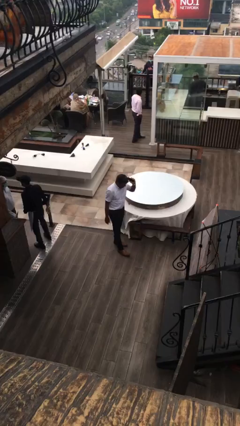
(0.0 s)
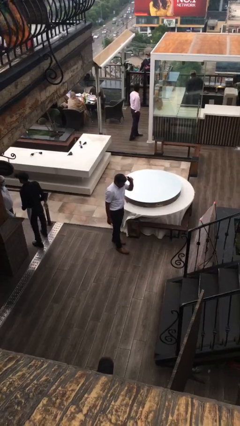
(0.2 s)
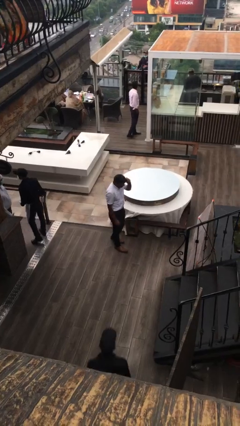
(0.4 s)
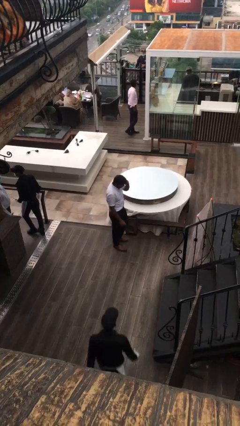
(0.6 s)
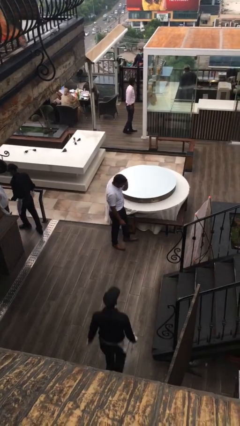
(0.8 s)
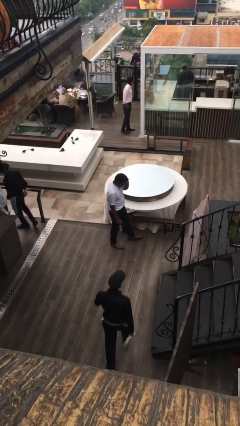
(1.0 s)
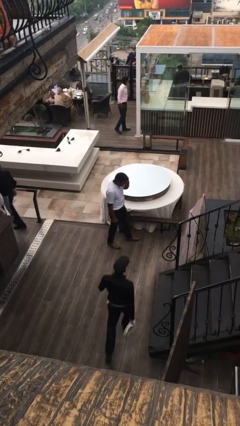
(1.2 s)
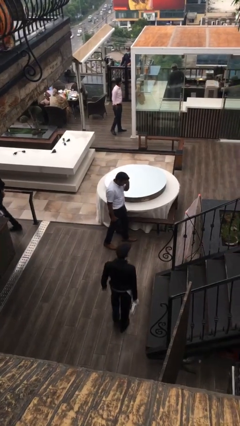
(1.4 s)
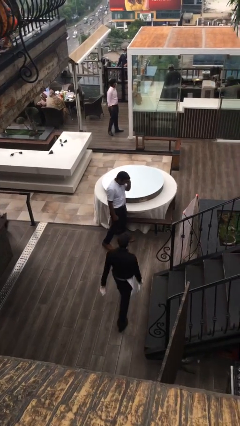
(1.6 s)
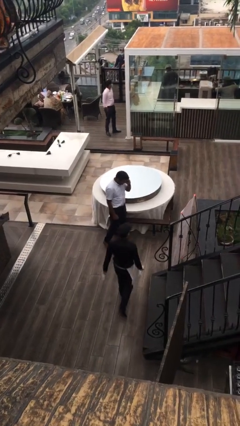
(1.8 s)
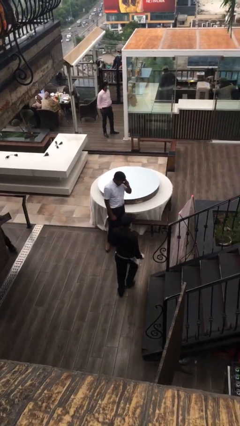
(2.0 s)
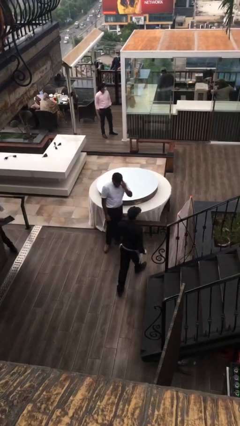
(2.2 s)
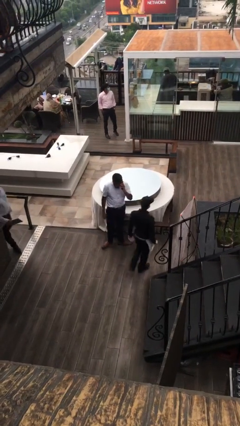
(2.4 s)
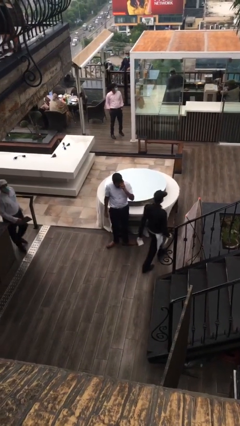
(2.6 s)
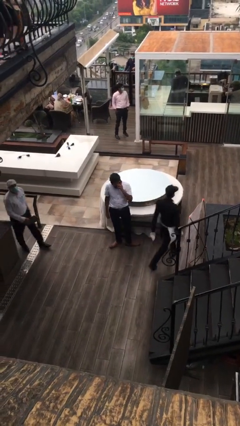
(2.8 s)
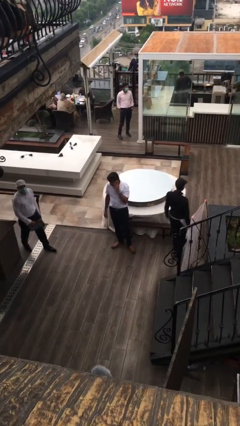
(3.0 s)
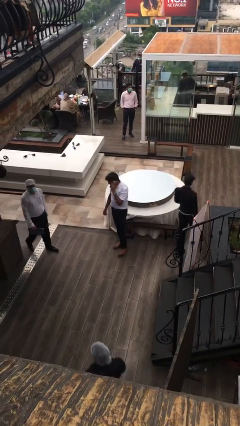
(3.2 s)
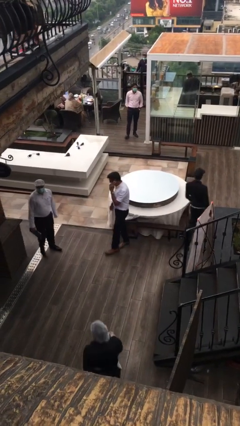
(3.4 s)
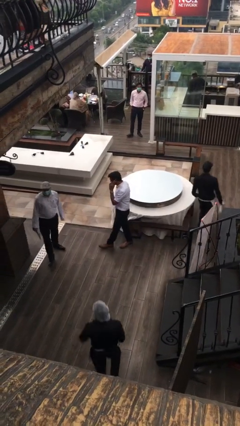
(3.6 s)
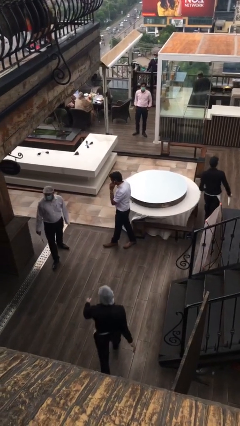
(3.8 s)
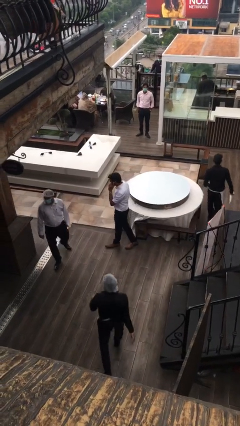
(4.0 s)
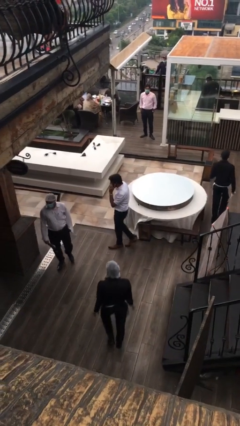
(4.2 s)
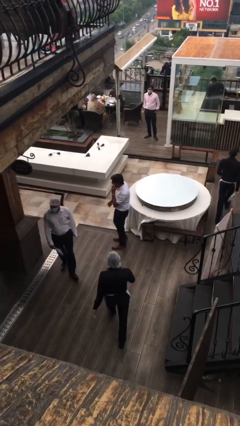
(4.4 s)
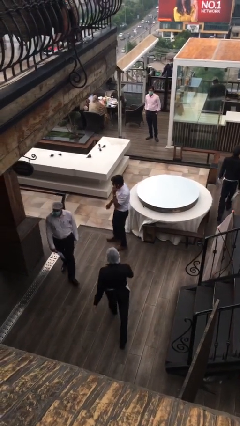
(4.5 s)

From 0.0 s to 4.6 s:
person talks on phone

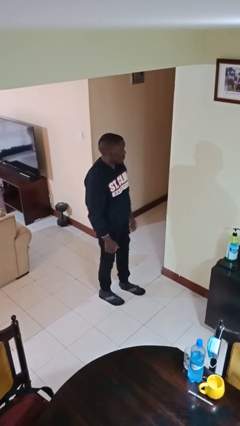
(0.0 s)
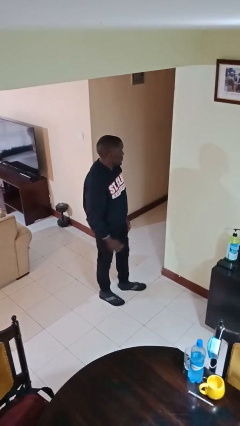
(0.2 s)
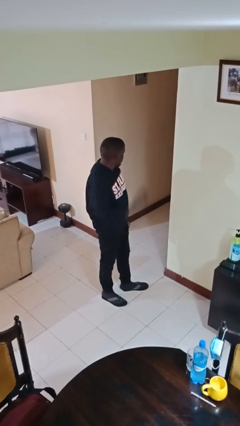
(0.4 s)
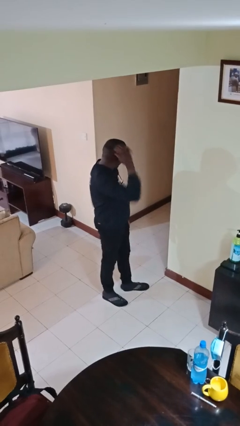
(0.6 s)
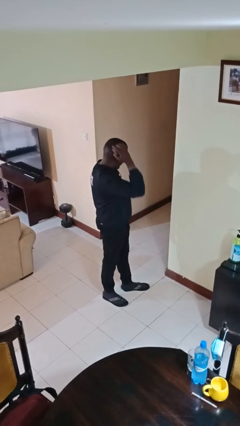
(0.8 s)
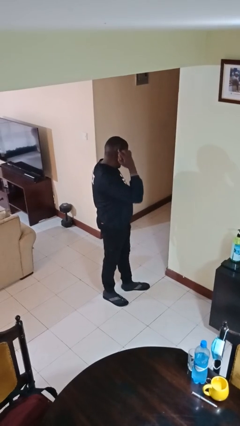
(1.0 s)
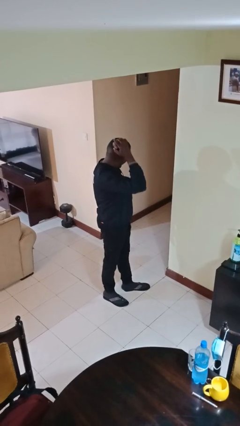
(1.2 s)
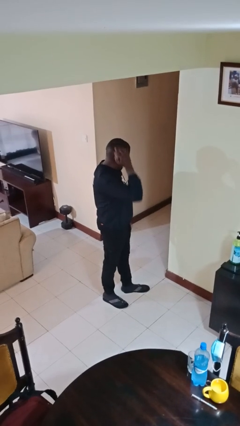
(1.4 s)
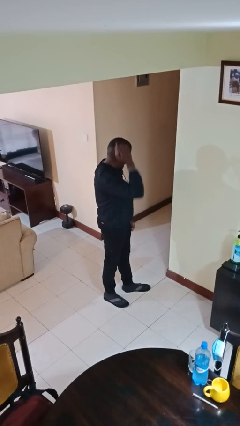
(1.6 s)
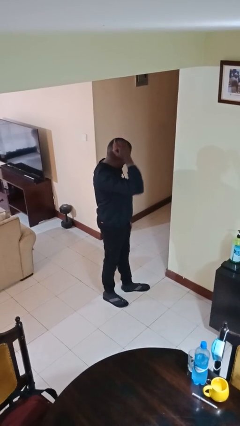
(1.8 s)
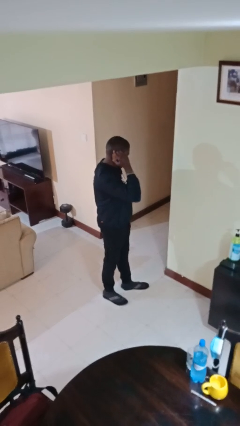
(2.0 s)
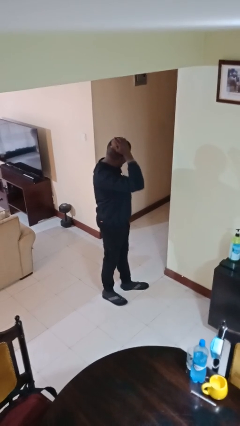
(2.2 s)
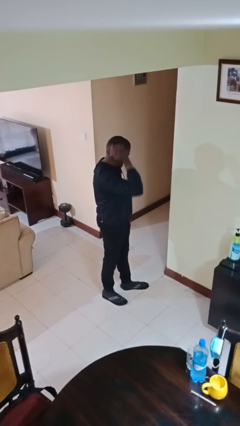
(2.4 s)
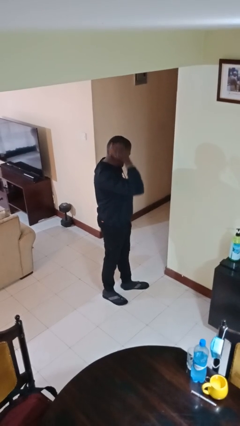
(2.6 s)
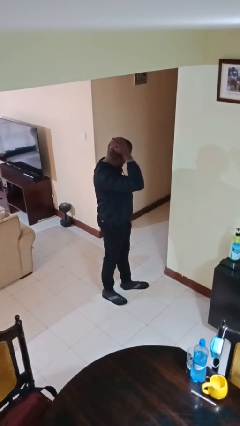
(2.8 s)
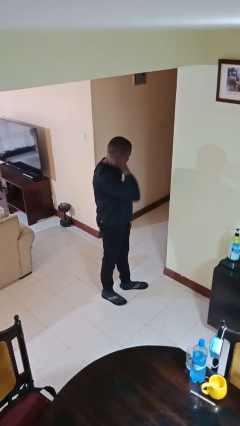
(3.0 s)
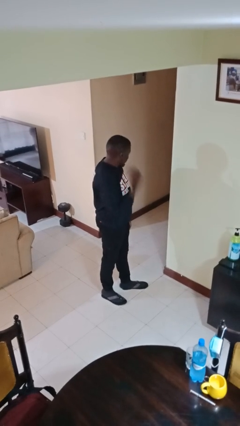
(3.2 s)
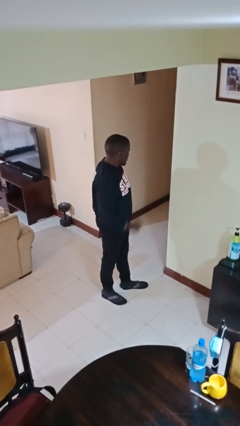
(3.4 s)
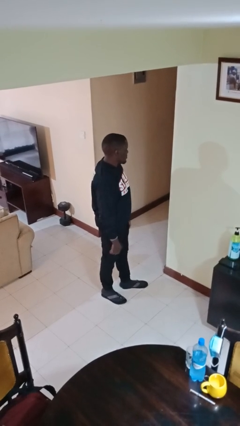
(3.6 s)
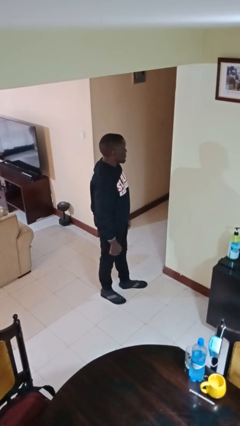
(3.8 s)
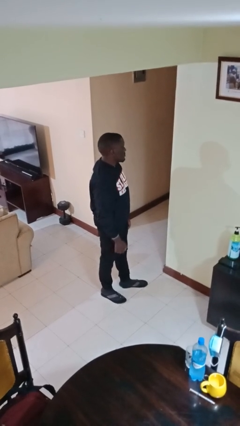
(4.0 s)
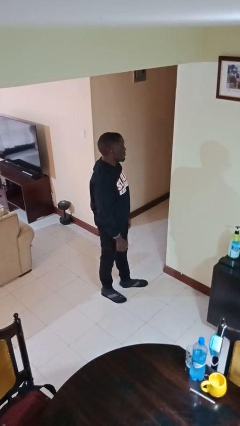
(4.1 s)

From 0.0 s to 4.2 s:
person brushes hair

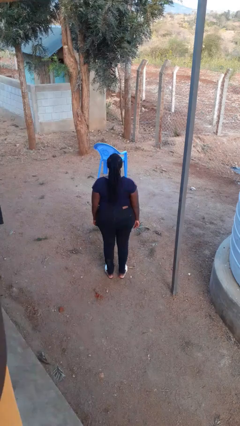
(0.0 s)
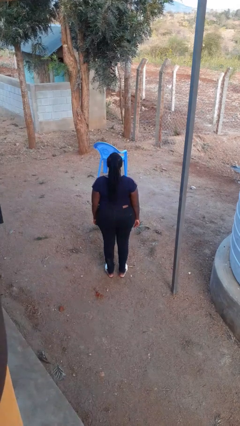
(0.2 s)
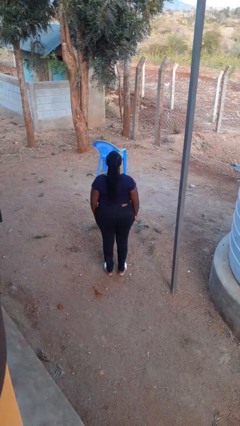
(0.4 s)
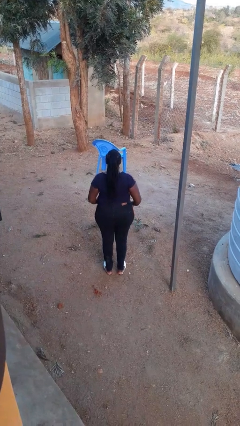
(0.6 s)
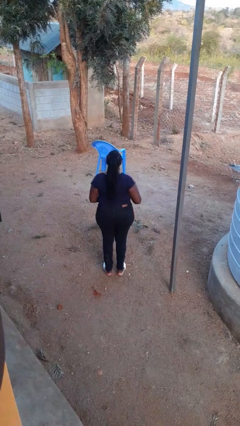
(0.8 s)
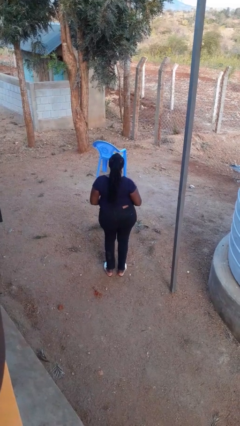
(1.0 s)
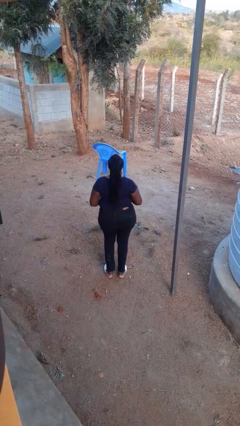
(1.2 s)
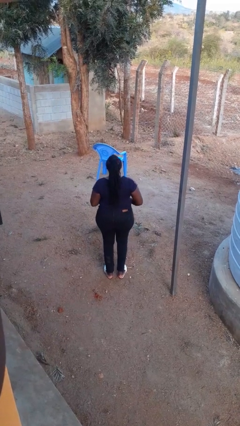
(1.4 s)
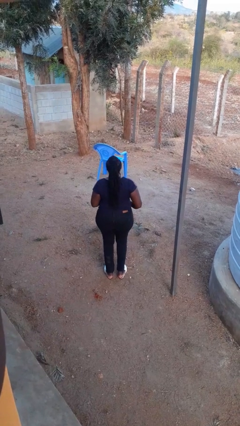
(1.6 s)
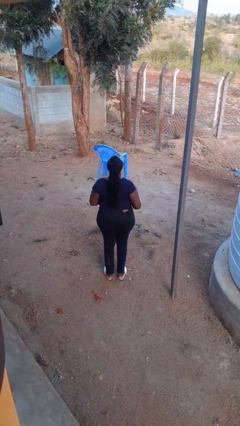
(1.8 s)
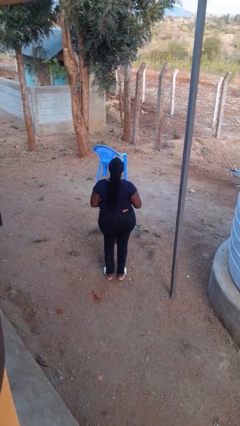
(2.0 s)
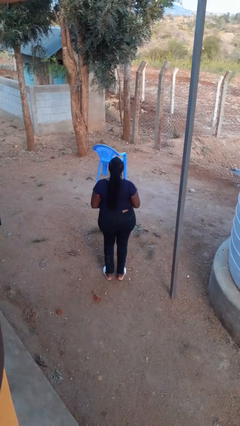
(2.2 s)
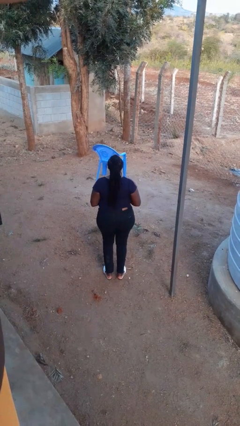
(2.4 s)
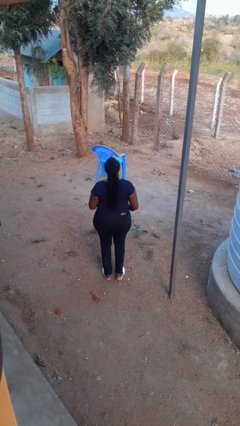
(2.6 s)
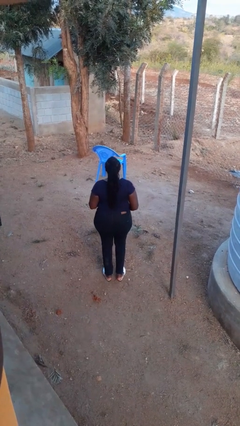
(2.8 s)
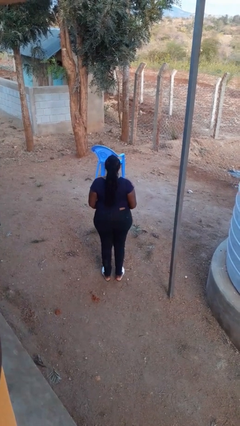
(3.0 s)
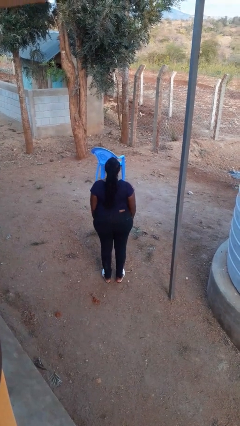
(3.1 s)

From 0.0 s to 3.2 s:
person wiggles hips

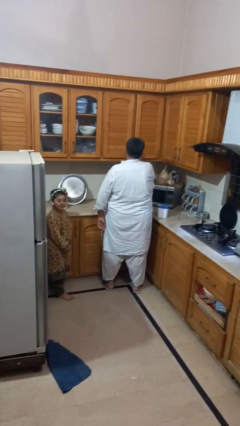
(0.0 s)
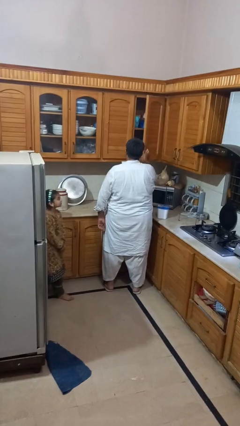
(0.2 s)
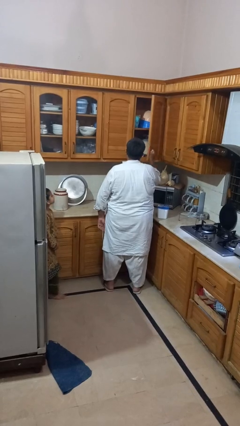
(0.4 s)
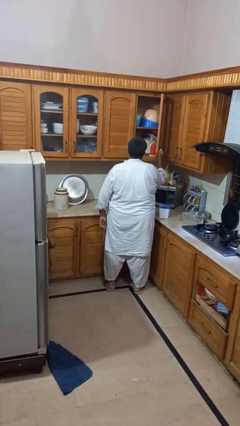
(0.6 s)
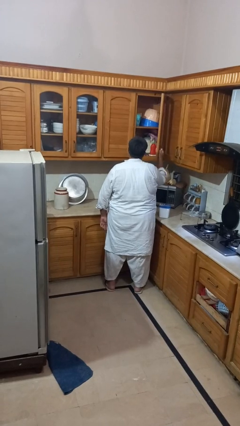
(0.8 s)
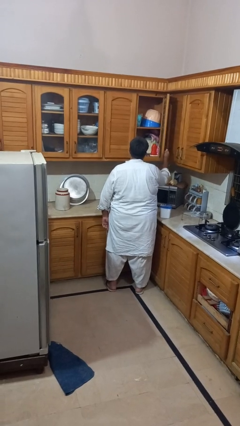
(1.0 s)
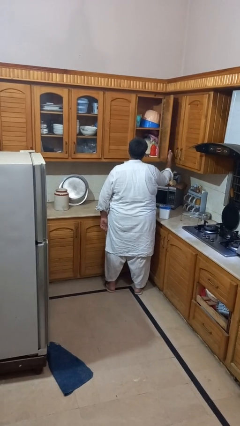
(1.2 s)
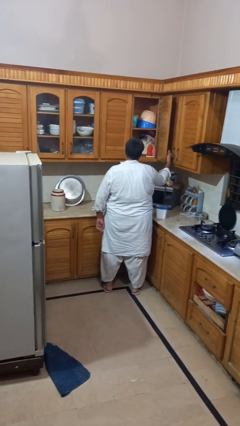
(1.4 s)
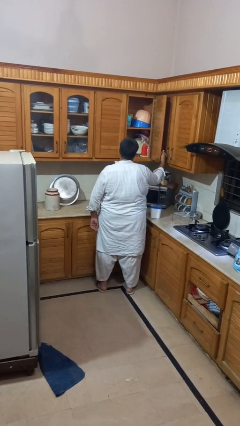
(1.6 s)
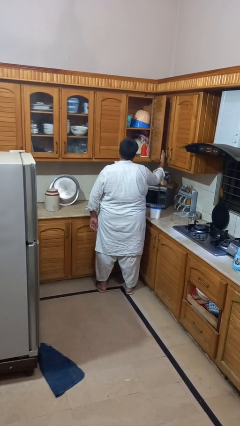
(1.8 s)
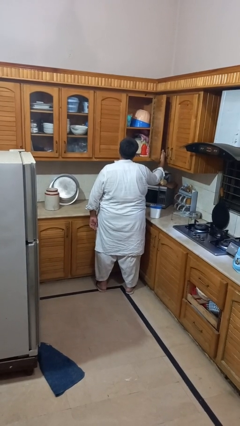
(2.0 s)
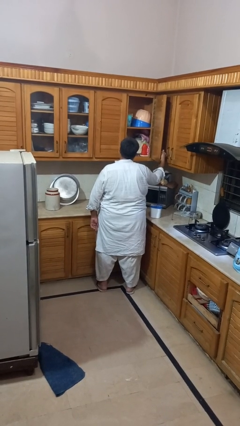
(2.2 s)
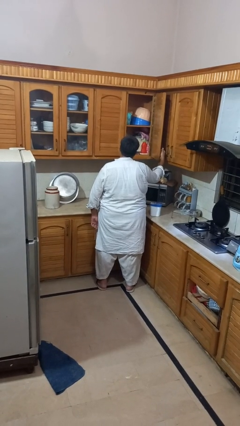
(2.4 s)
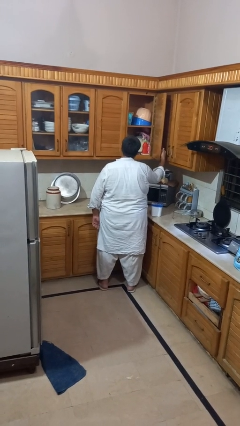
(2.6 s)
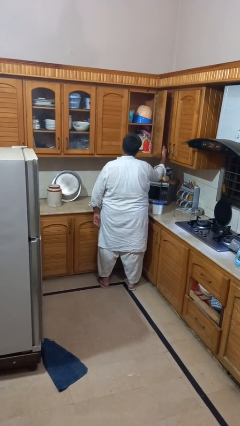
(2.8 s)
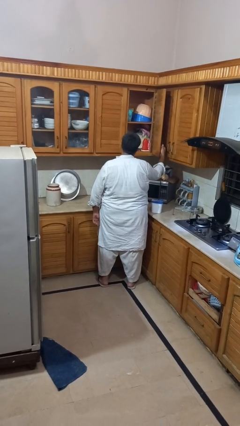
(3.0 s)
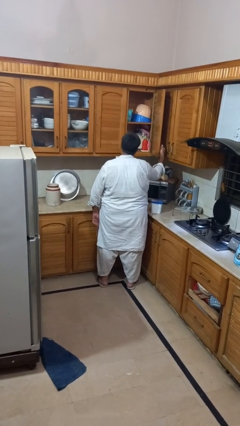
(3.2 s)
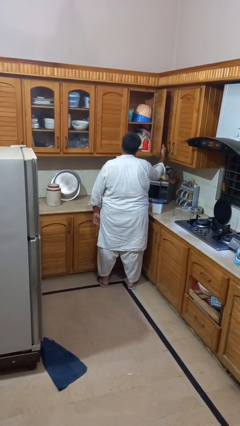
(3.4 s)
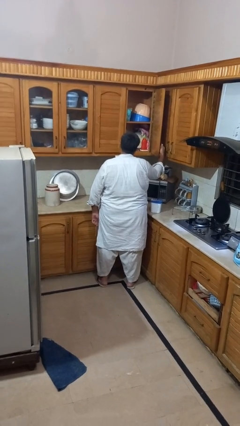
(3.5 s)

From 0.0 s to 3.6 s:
person opens cabinet

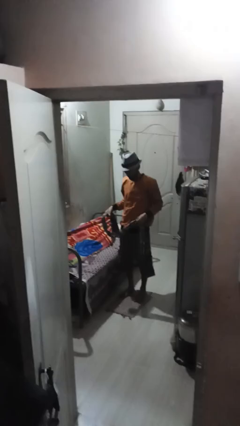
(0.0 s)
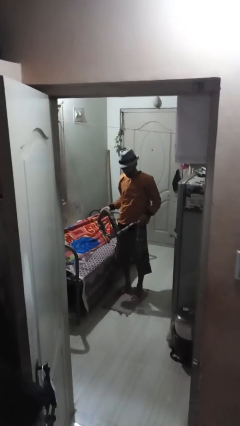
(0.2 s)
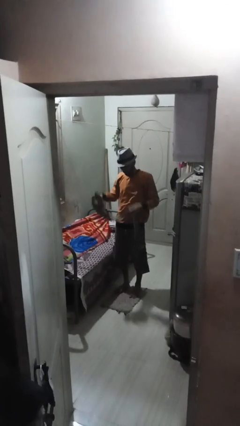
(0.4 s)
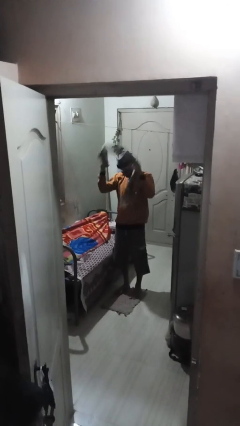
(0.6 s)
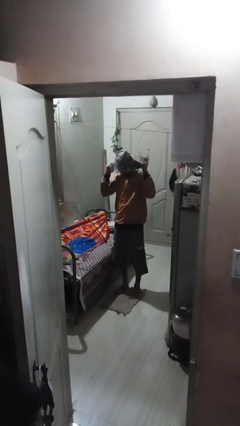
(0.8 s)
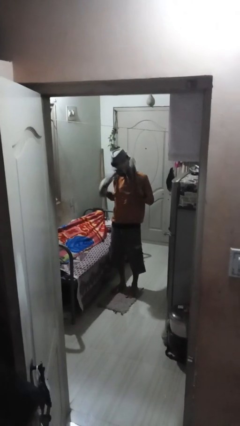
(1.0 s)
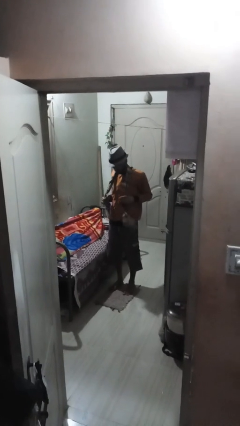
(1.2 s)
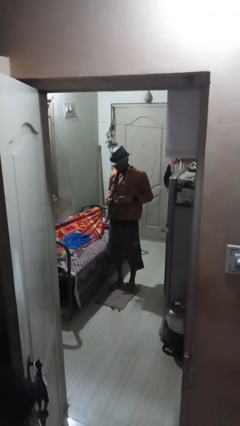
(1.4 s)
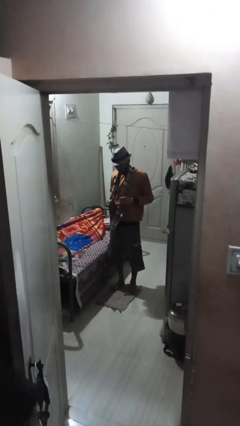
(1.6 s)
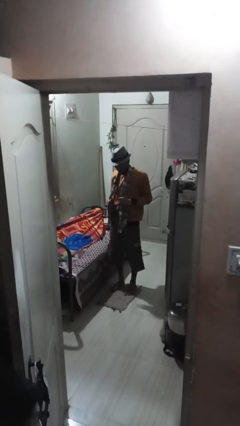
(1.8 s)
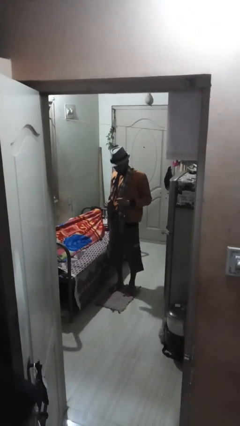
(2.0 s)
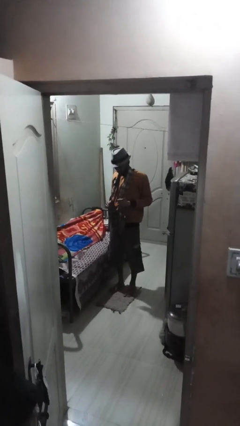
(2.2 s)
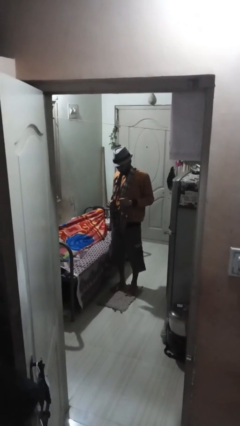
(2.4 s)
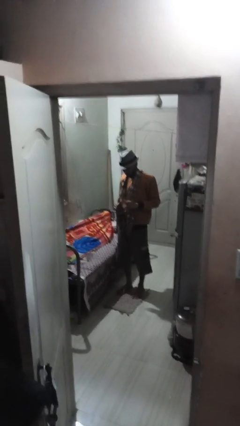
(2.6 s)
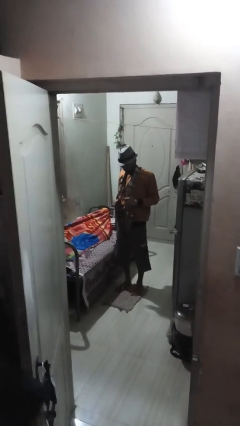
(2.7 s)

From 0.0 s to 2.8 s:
person puts on scarf
